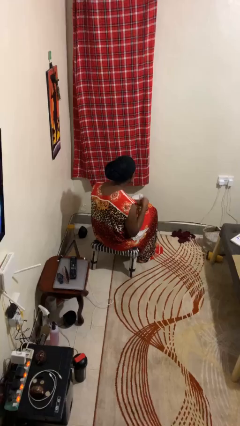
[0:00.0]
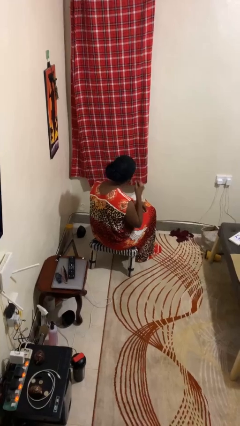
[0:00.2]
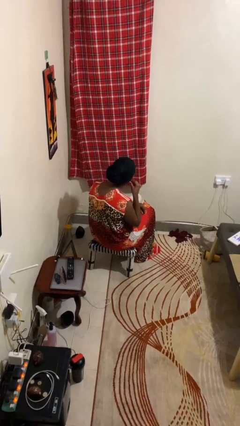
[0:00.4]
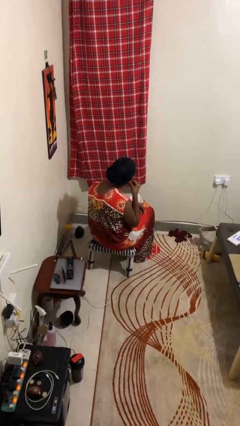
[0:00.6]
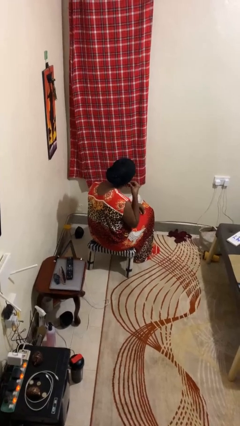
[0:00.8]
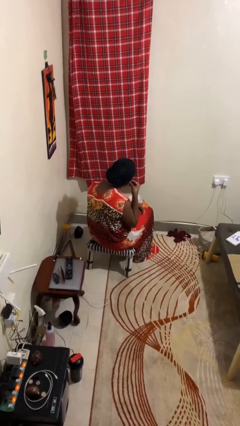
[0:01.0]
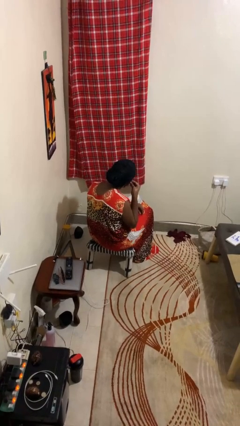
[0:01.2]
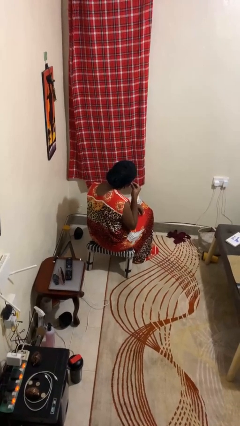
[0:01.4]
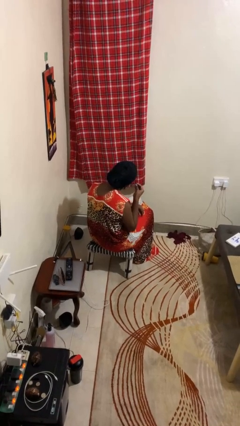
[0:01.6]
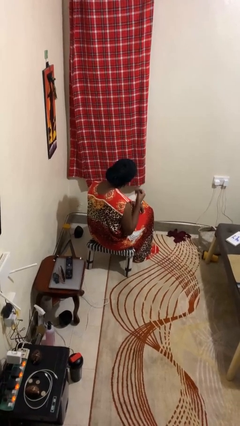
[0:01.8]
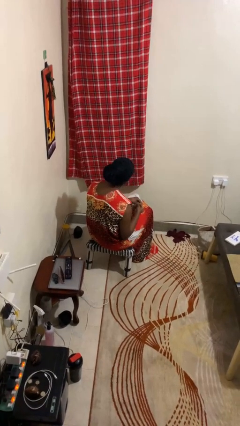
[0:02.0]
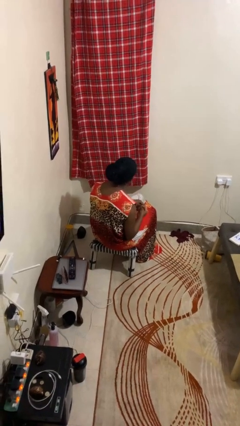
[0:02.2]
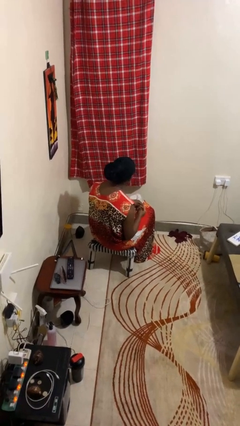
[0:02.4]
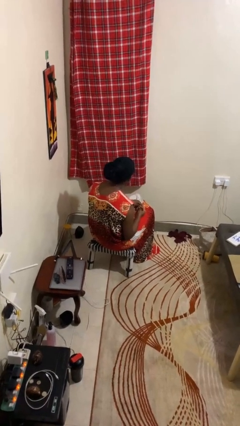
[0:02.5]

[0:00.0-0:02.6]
person takes off earrings

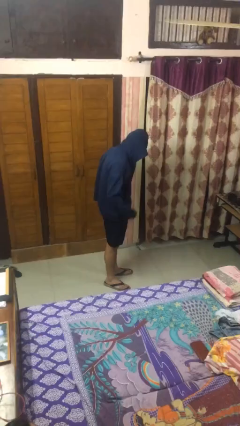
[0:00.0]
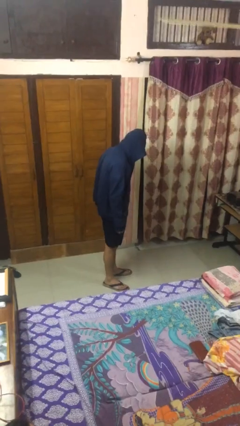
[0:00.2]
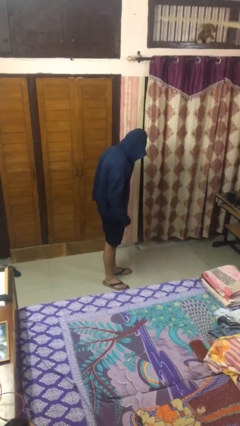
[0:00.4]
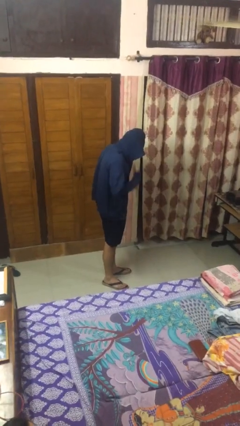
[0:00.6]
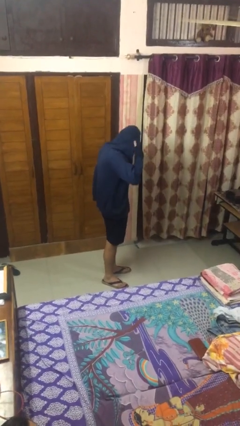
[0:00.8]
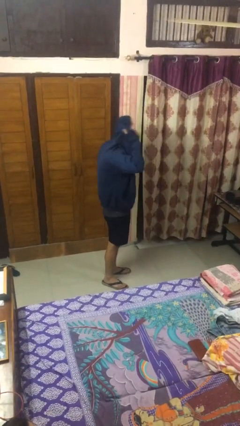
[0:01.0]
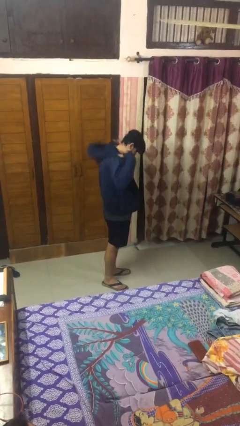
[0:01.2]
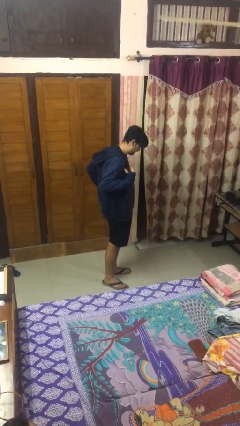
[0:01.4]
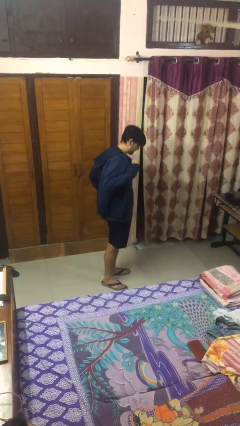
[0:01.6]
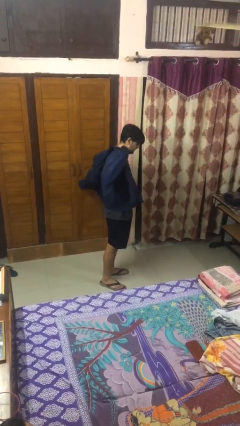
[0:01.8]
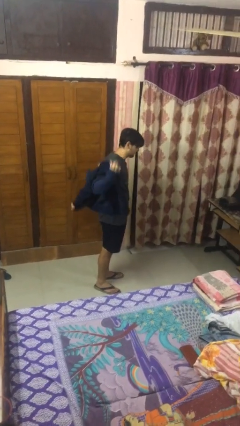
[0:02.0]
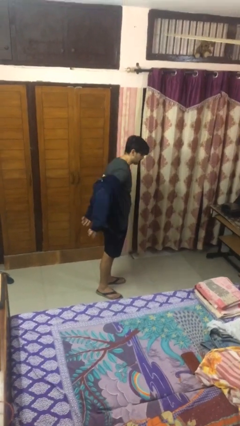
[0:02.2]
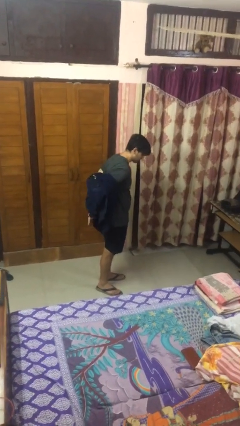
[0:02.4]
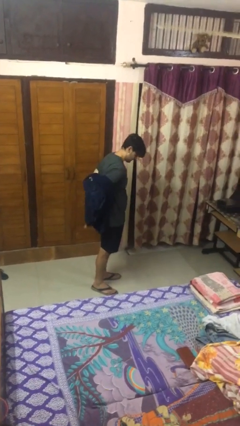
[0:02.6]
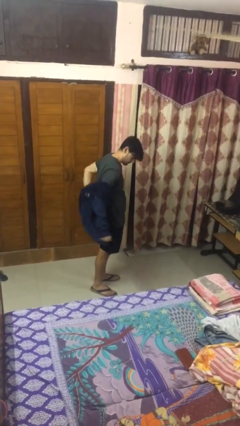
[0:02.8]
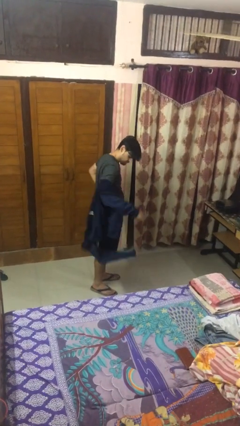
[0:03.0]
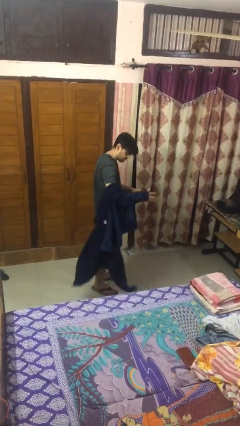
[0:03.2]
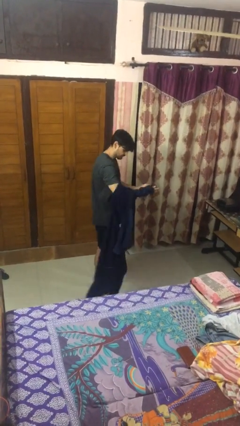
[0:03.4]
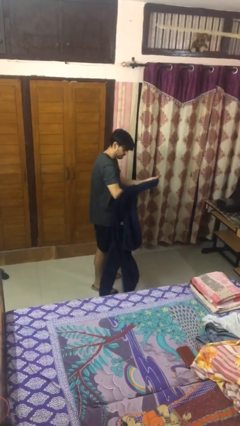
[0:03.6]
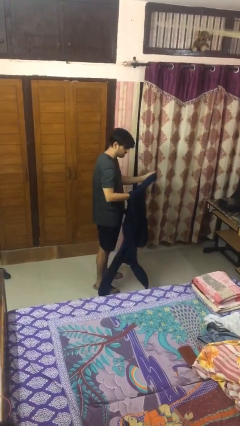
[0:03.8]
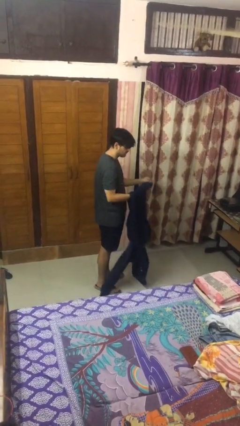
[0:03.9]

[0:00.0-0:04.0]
person takes off hoodie

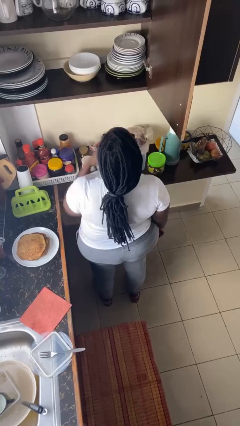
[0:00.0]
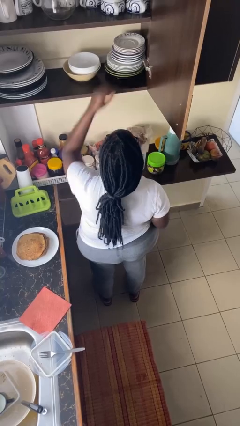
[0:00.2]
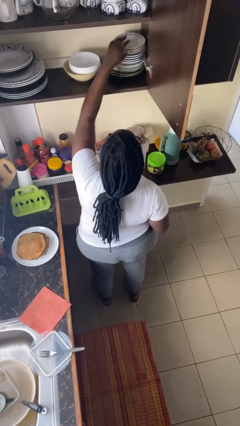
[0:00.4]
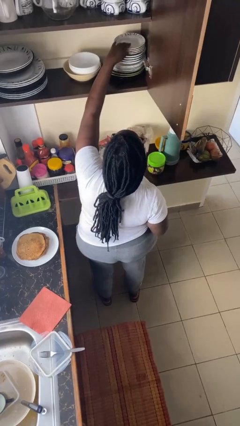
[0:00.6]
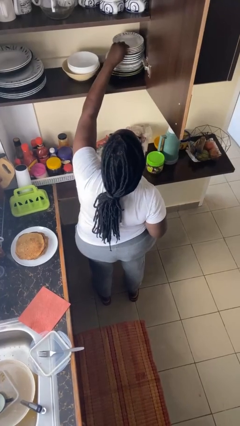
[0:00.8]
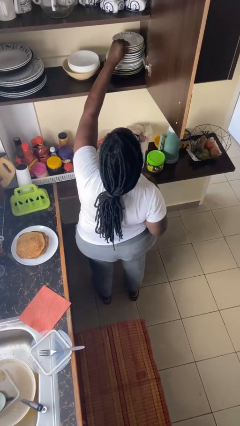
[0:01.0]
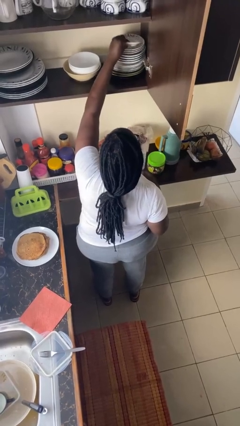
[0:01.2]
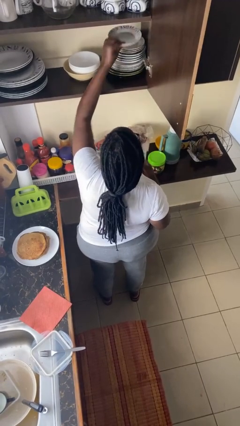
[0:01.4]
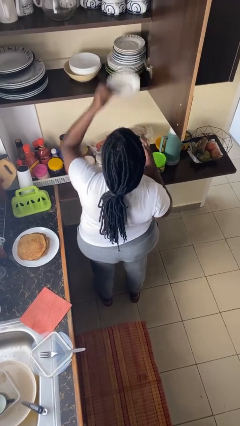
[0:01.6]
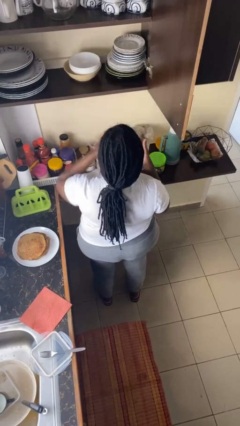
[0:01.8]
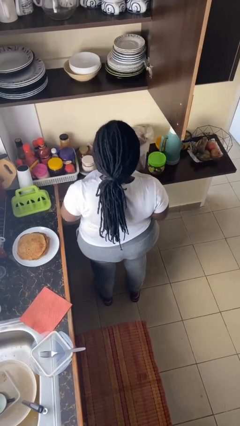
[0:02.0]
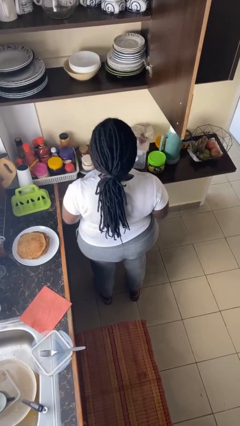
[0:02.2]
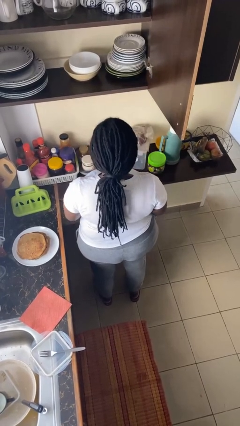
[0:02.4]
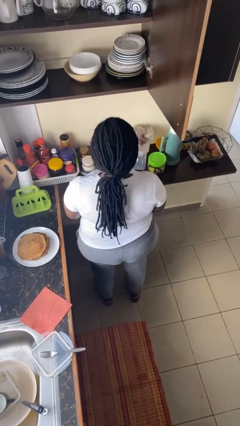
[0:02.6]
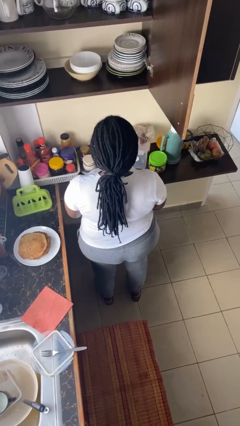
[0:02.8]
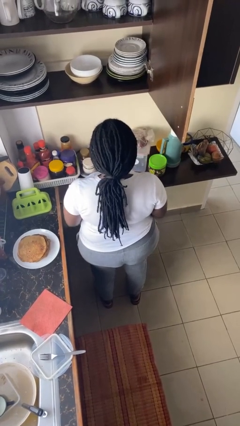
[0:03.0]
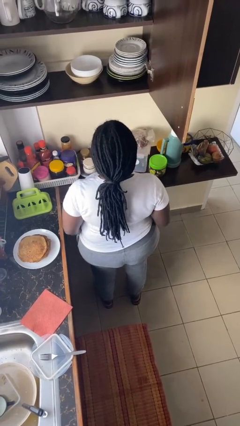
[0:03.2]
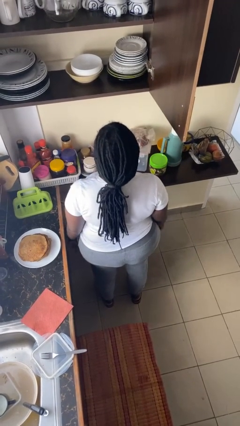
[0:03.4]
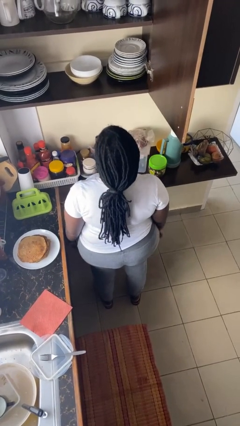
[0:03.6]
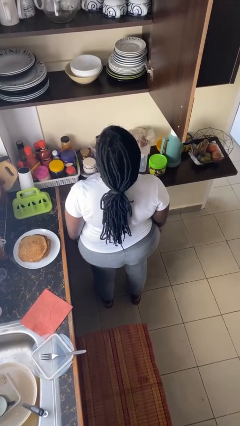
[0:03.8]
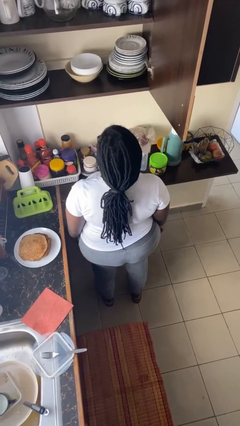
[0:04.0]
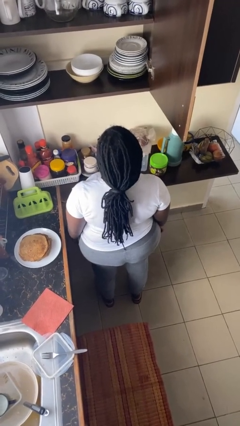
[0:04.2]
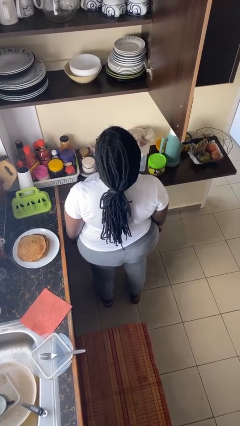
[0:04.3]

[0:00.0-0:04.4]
person takes object from cabinet

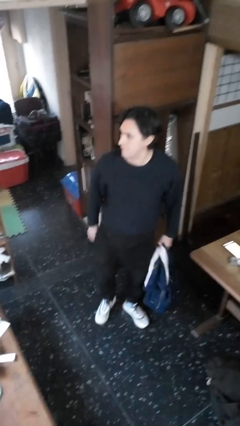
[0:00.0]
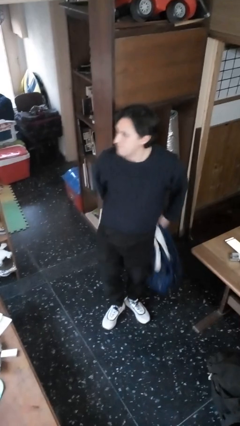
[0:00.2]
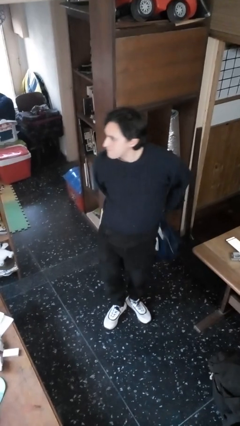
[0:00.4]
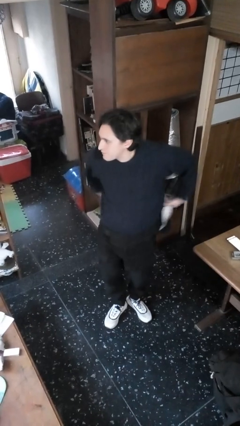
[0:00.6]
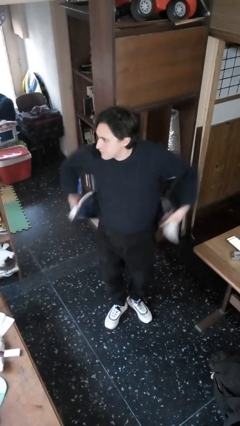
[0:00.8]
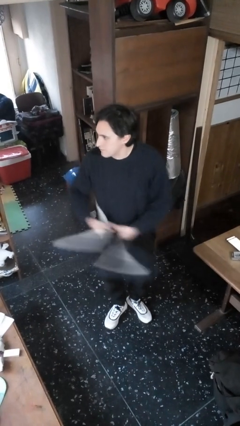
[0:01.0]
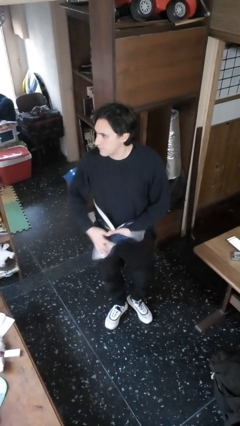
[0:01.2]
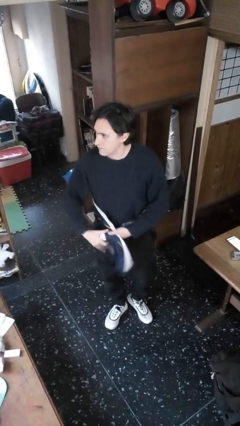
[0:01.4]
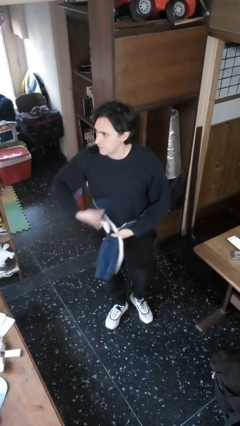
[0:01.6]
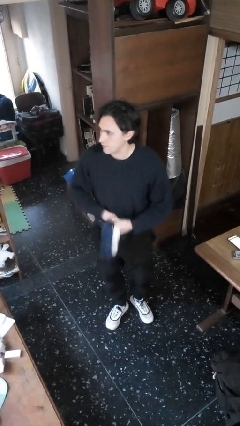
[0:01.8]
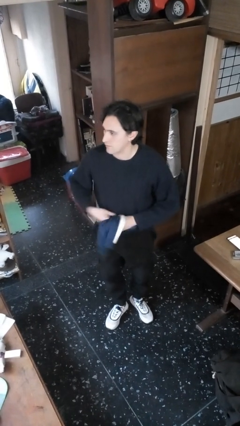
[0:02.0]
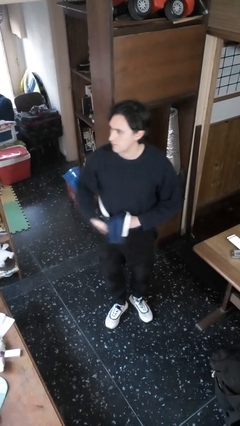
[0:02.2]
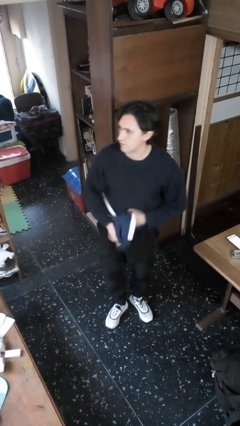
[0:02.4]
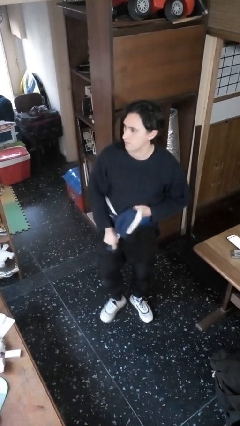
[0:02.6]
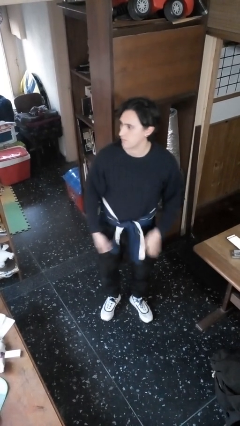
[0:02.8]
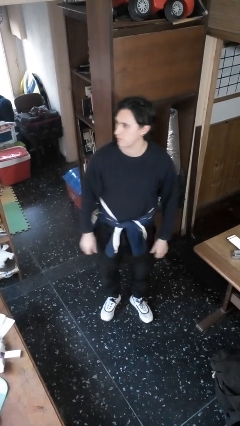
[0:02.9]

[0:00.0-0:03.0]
person ties jacket around waist

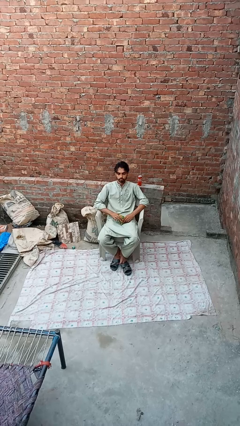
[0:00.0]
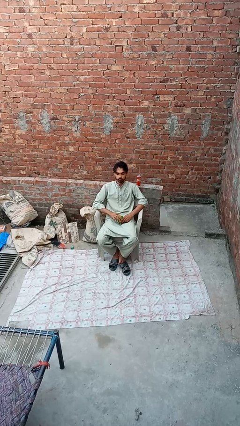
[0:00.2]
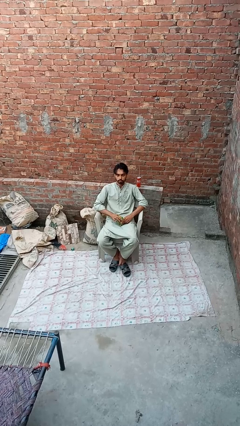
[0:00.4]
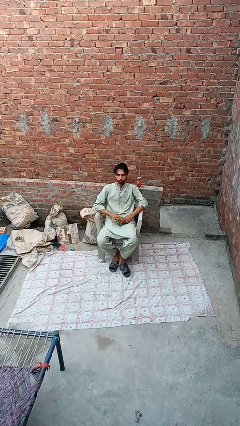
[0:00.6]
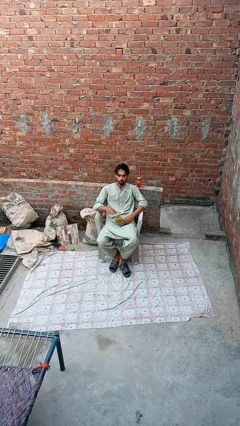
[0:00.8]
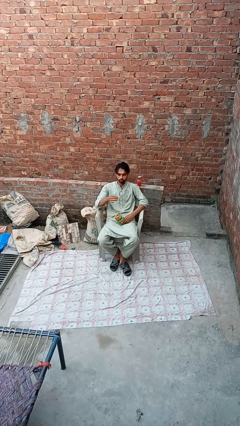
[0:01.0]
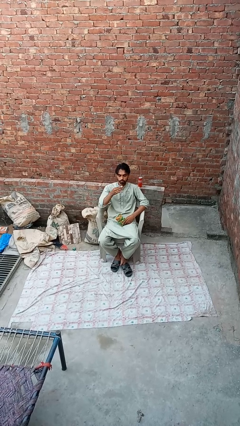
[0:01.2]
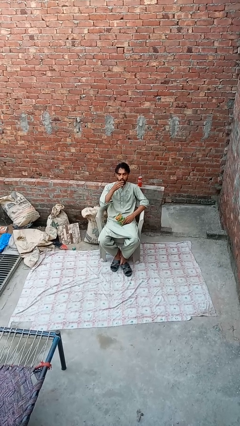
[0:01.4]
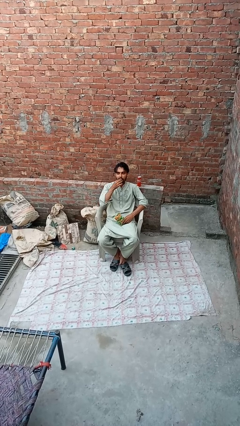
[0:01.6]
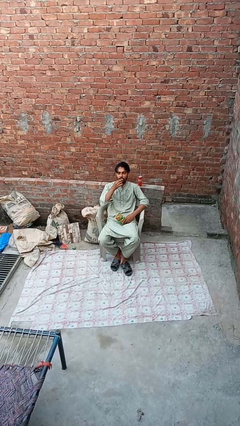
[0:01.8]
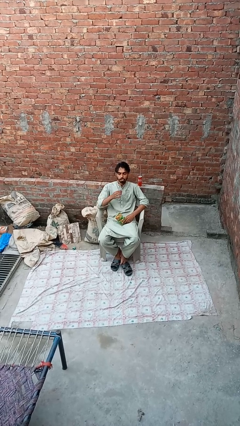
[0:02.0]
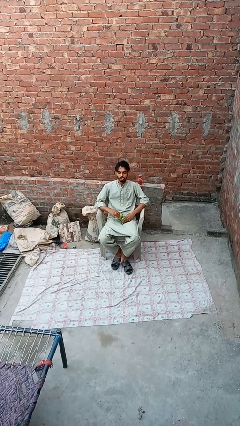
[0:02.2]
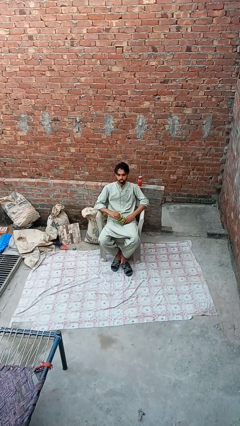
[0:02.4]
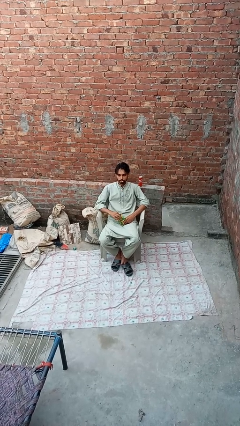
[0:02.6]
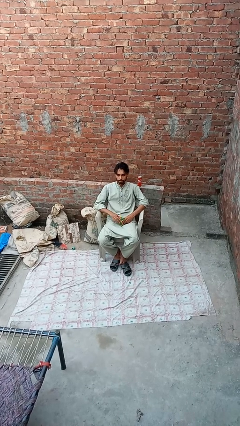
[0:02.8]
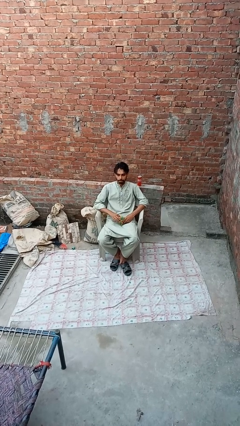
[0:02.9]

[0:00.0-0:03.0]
person eats snack from bag

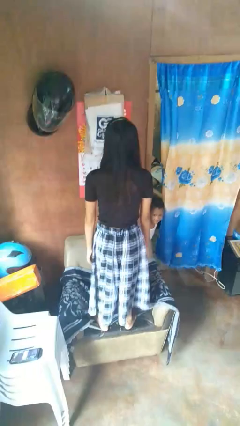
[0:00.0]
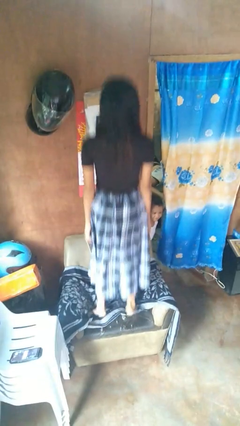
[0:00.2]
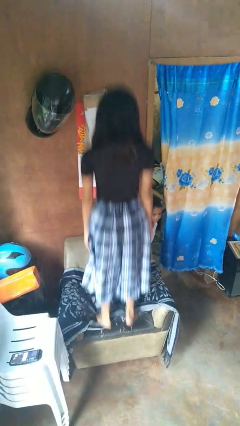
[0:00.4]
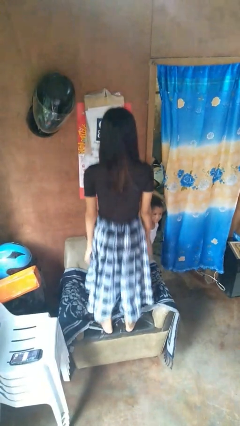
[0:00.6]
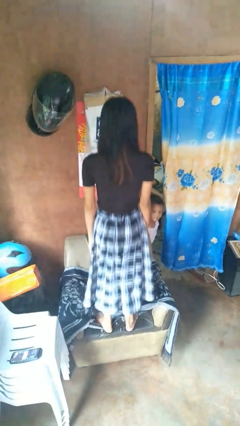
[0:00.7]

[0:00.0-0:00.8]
person jumps on couch
